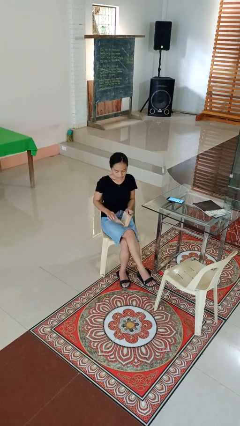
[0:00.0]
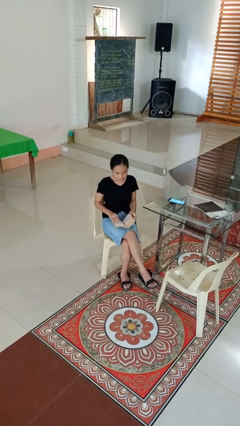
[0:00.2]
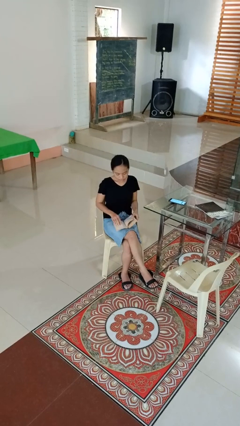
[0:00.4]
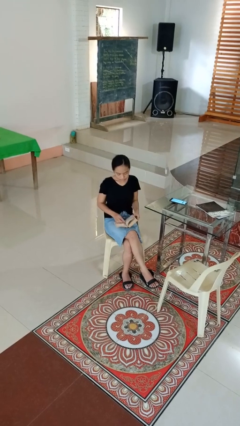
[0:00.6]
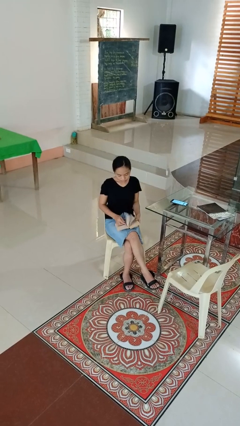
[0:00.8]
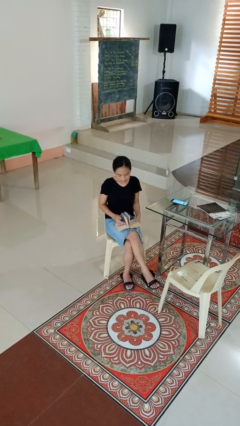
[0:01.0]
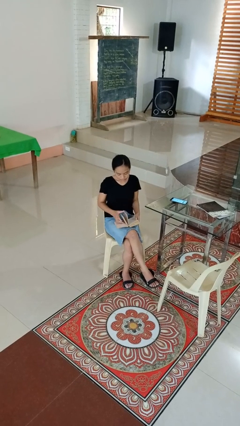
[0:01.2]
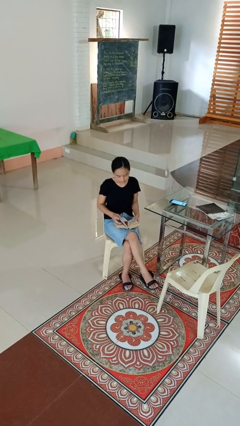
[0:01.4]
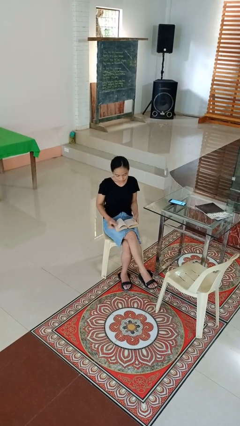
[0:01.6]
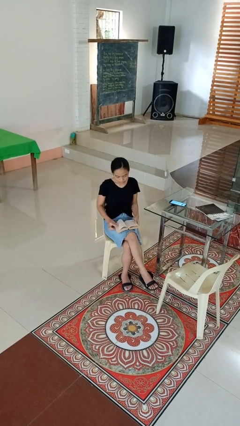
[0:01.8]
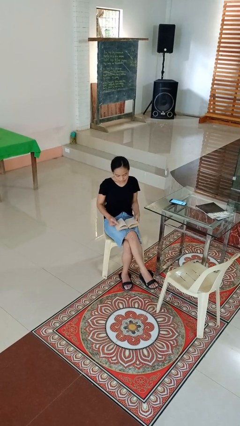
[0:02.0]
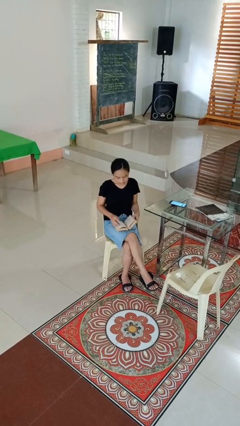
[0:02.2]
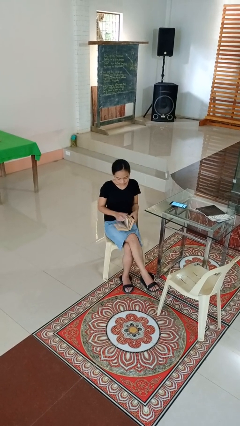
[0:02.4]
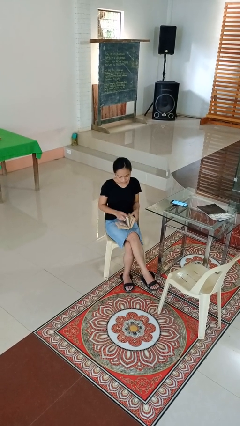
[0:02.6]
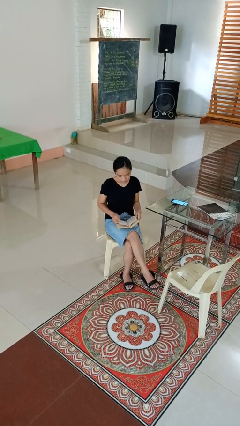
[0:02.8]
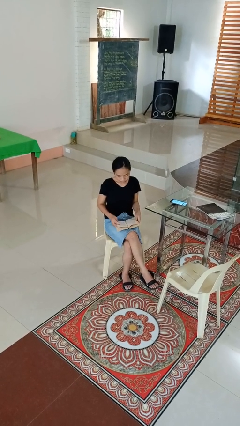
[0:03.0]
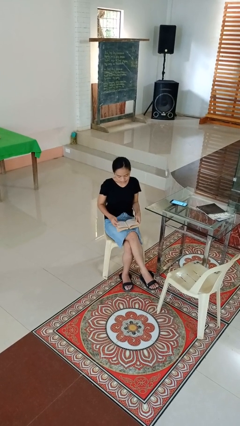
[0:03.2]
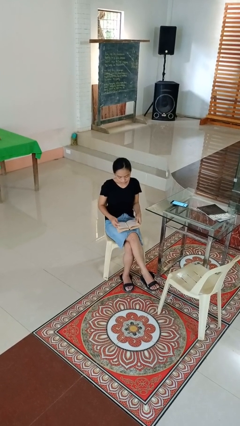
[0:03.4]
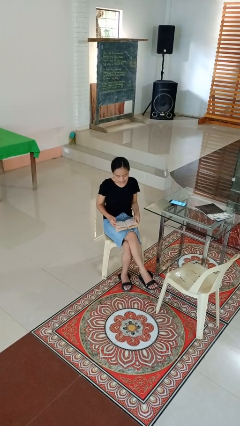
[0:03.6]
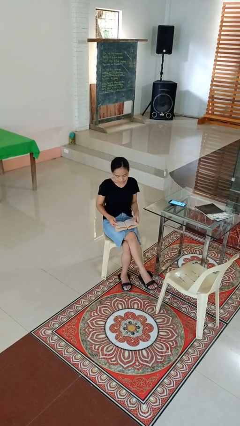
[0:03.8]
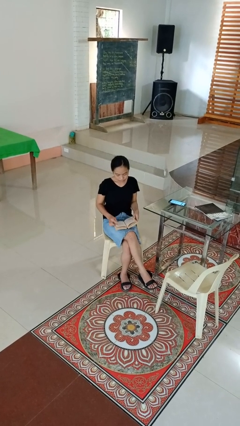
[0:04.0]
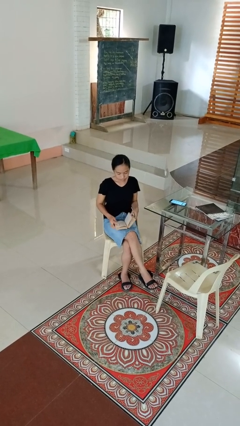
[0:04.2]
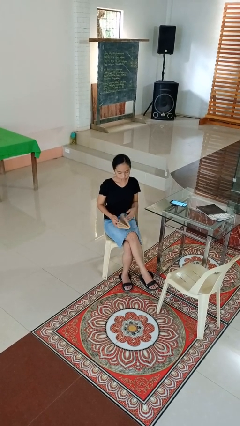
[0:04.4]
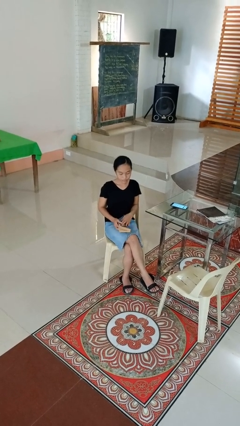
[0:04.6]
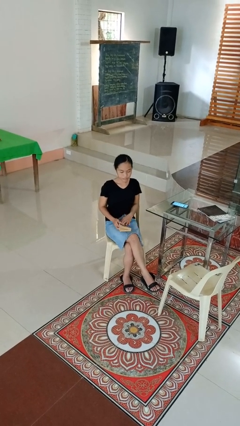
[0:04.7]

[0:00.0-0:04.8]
person reads book

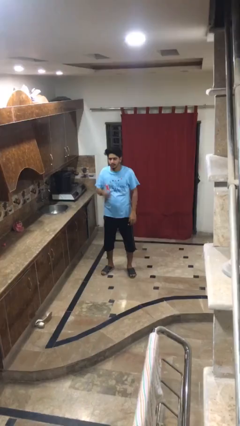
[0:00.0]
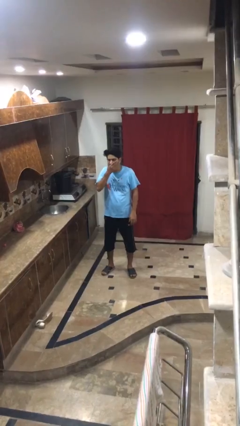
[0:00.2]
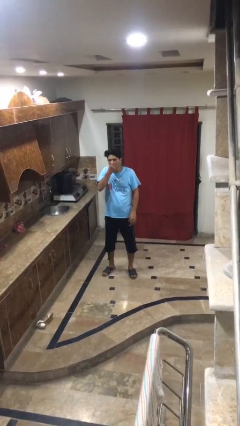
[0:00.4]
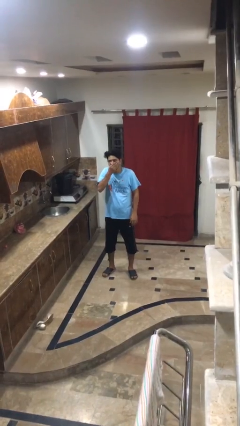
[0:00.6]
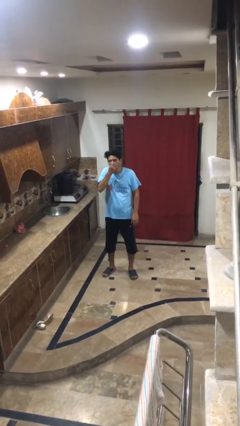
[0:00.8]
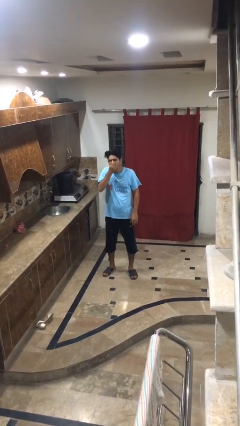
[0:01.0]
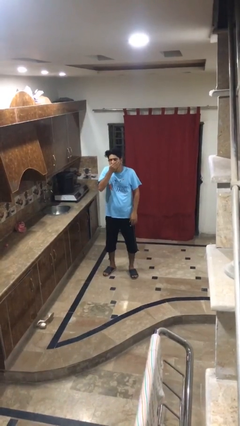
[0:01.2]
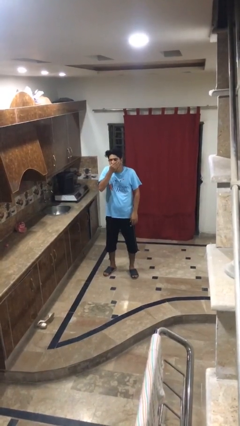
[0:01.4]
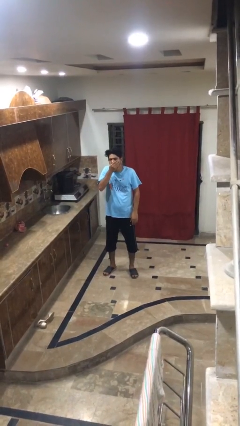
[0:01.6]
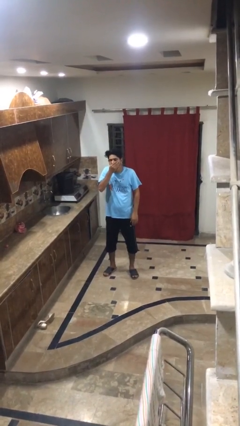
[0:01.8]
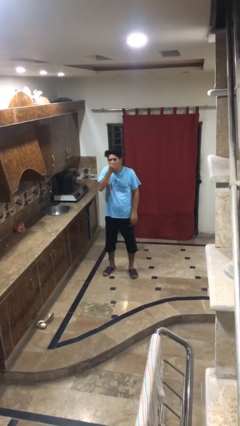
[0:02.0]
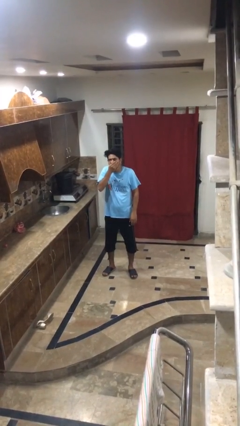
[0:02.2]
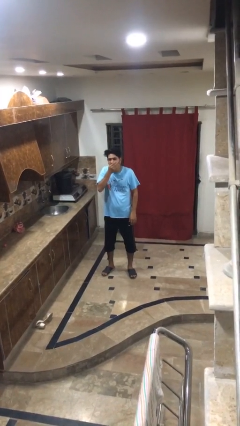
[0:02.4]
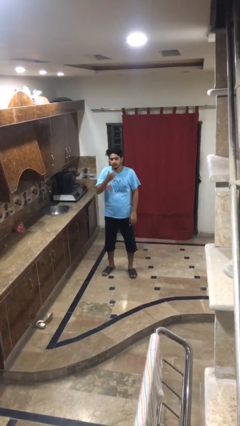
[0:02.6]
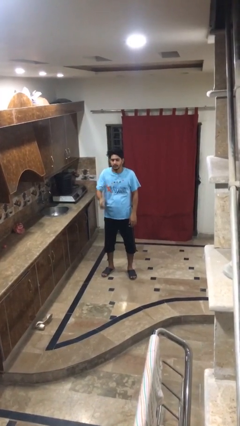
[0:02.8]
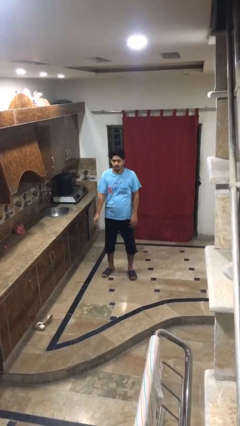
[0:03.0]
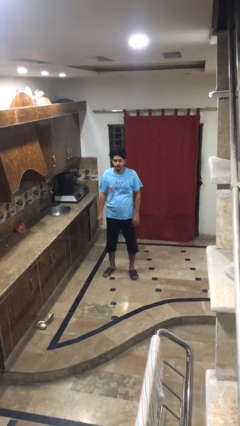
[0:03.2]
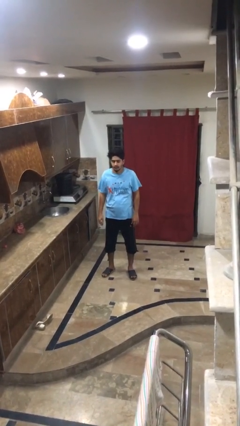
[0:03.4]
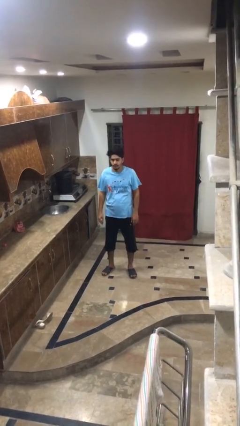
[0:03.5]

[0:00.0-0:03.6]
person sneezes into hand

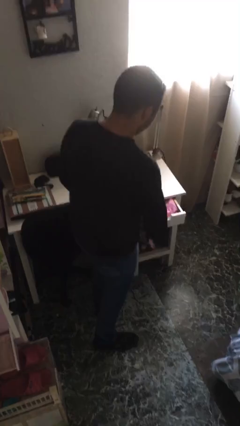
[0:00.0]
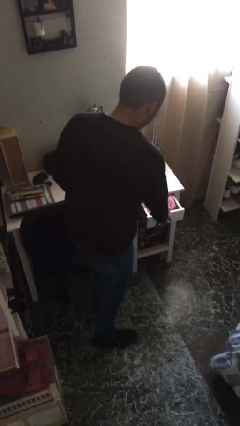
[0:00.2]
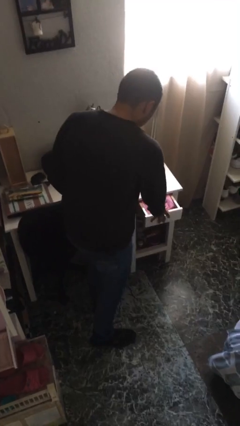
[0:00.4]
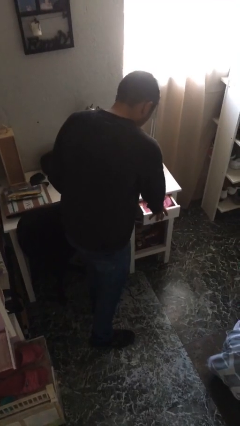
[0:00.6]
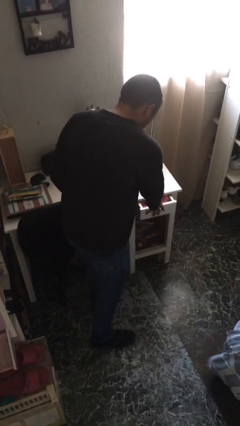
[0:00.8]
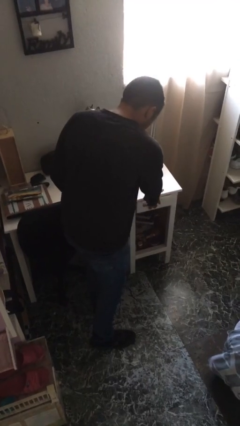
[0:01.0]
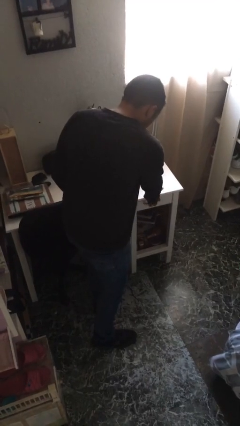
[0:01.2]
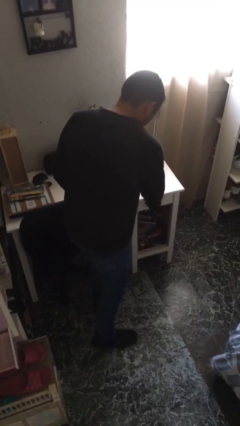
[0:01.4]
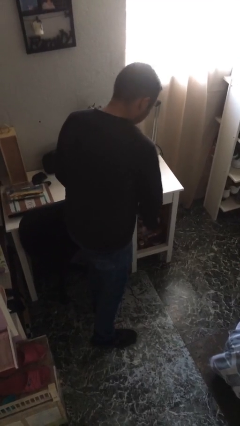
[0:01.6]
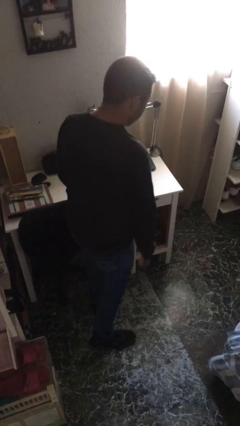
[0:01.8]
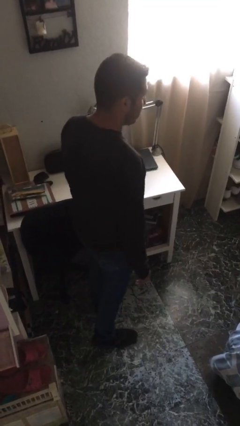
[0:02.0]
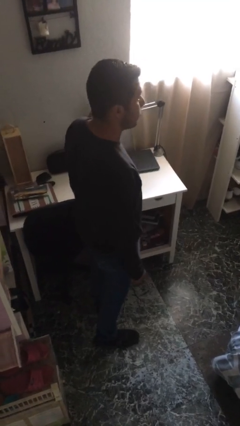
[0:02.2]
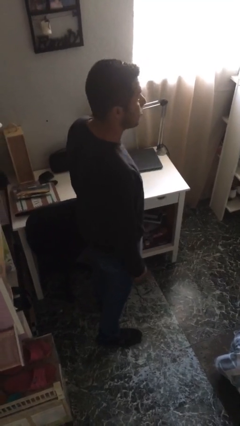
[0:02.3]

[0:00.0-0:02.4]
person closes dresser drawer

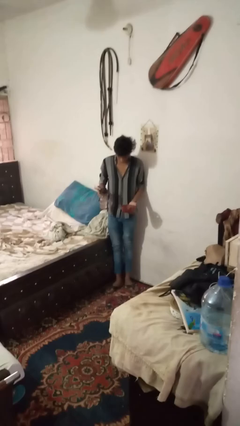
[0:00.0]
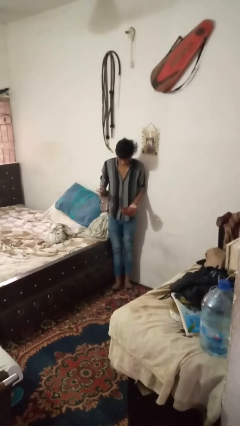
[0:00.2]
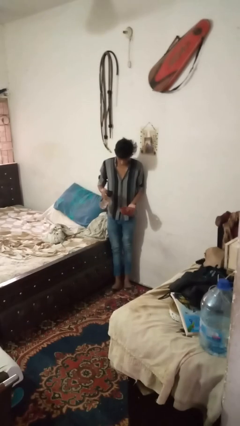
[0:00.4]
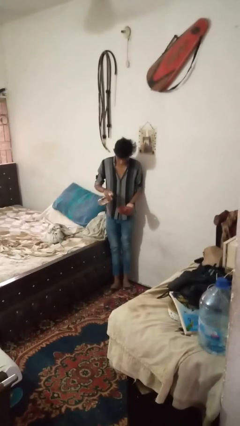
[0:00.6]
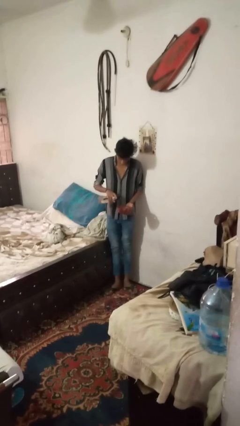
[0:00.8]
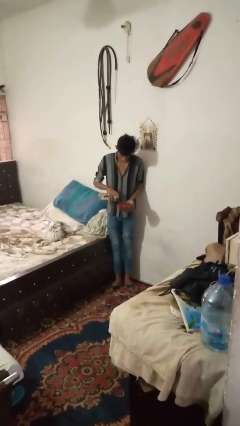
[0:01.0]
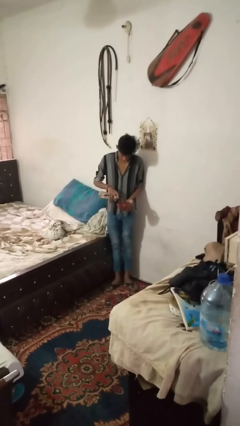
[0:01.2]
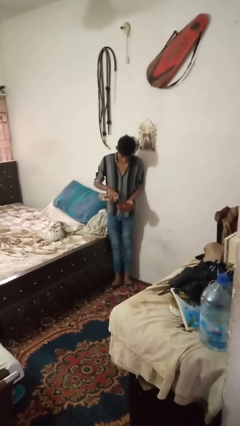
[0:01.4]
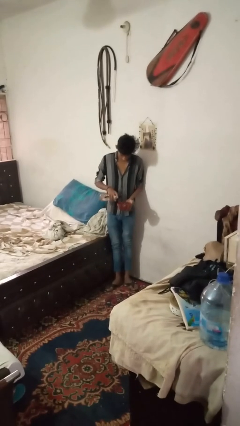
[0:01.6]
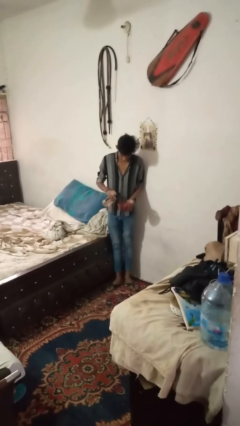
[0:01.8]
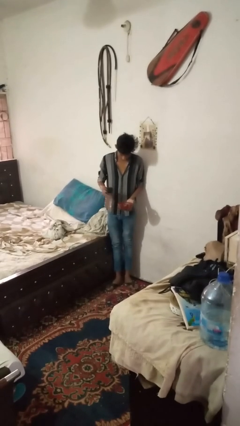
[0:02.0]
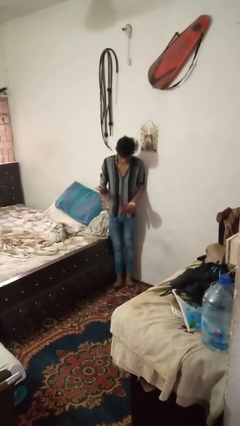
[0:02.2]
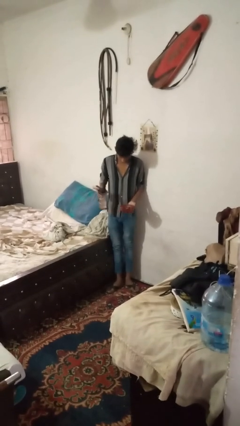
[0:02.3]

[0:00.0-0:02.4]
person pours liquid into cup

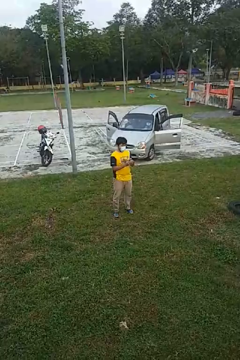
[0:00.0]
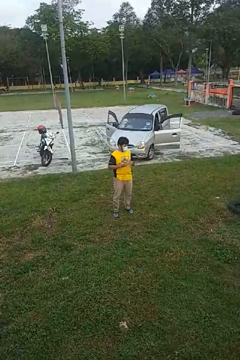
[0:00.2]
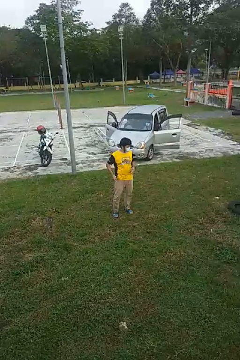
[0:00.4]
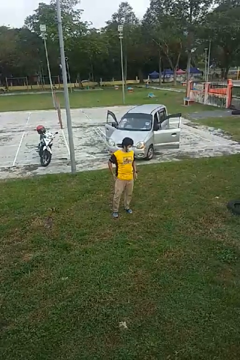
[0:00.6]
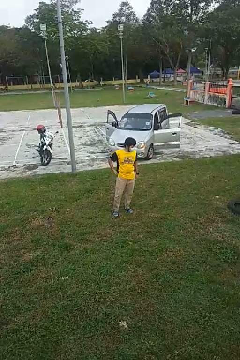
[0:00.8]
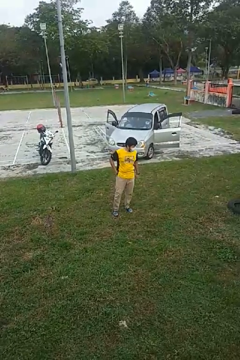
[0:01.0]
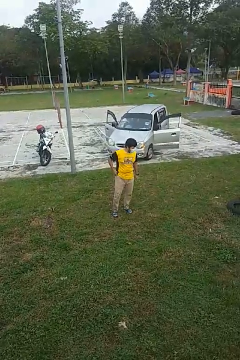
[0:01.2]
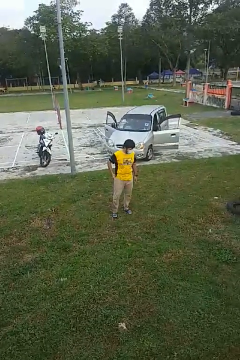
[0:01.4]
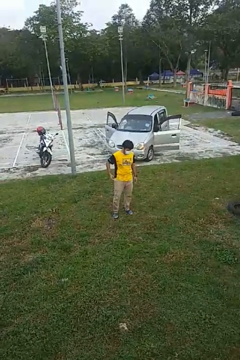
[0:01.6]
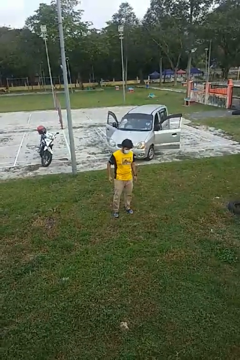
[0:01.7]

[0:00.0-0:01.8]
person puts phone into pocket

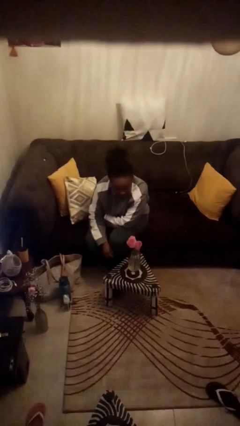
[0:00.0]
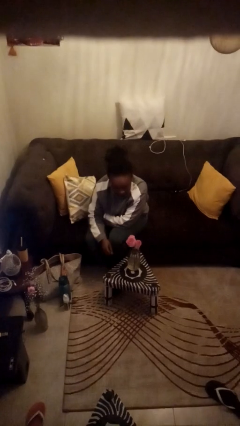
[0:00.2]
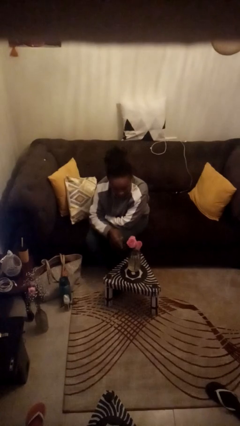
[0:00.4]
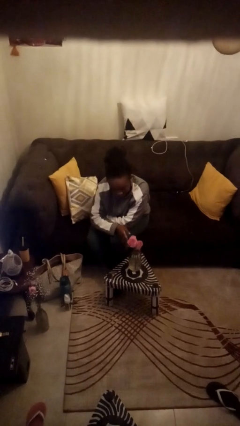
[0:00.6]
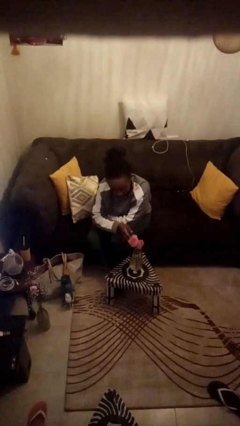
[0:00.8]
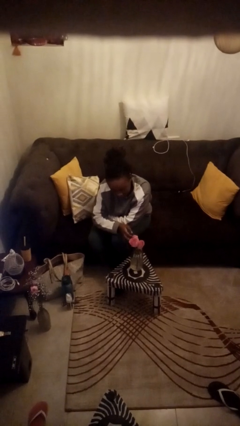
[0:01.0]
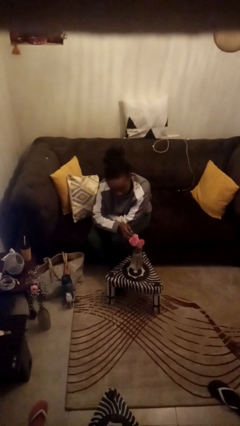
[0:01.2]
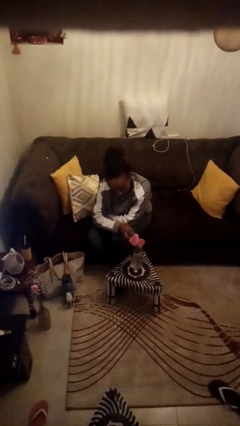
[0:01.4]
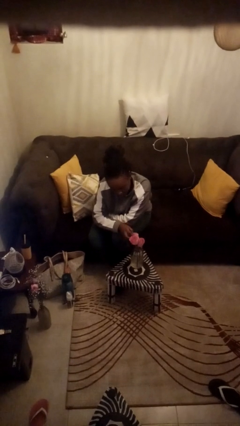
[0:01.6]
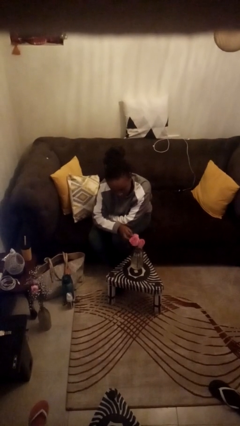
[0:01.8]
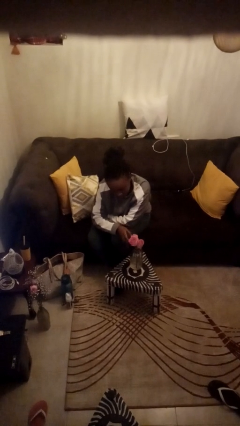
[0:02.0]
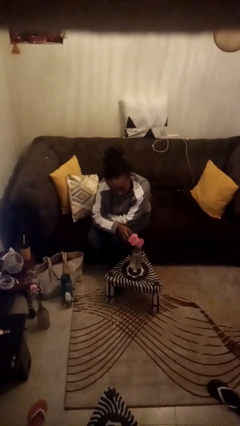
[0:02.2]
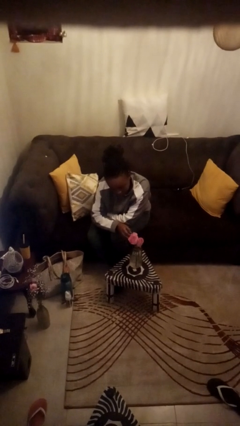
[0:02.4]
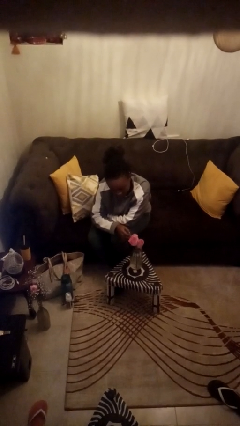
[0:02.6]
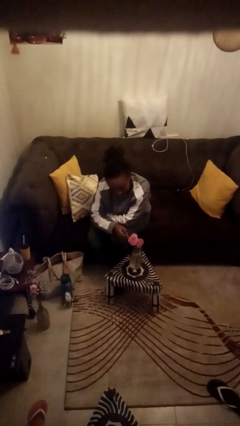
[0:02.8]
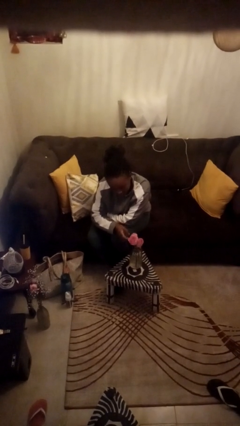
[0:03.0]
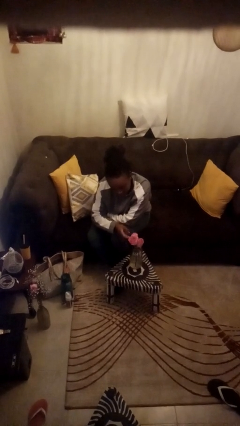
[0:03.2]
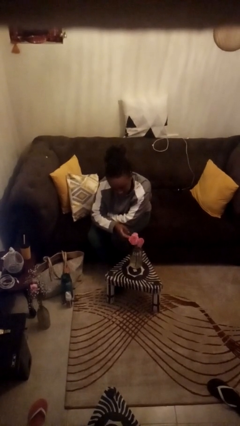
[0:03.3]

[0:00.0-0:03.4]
person arranges flowers in vase
